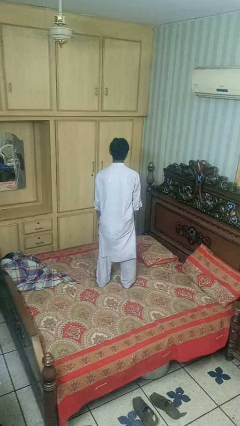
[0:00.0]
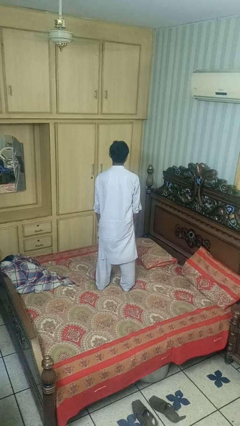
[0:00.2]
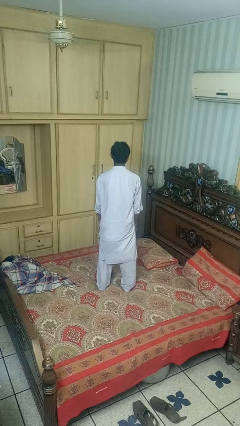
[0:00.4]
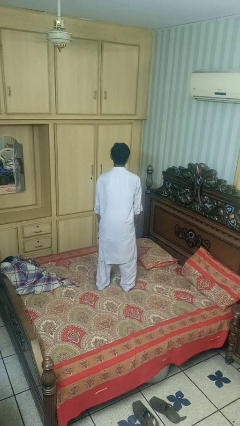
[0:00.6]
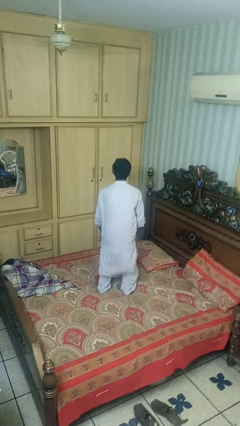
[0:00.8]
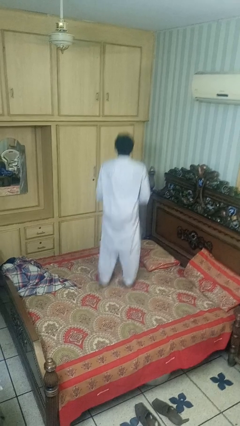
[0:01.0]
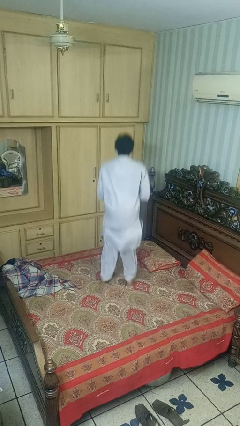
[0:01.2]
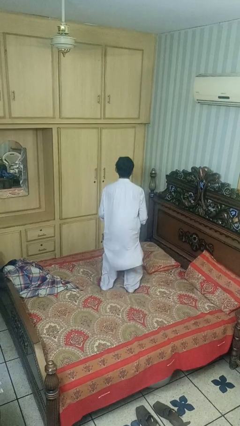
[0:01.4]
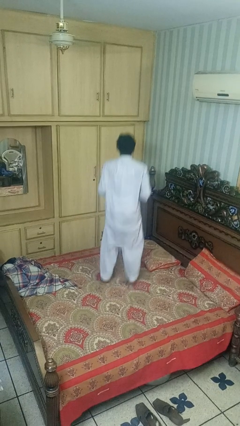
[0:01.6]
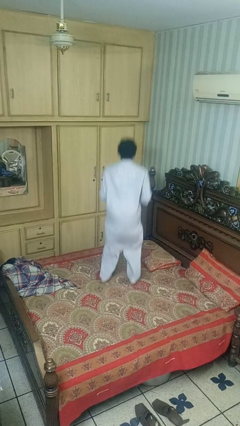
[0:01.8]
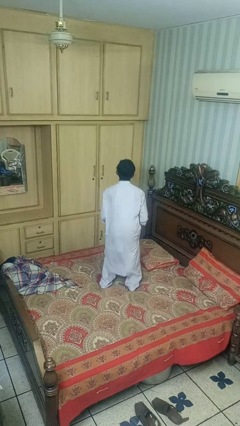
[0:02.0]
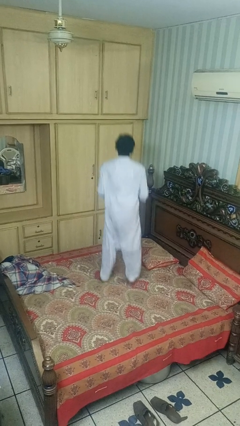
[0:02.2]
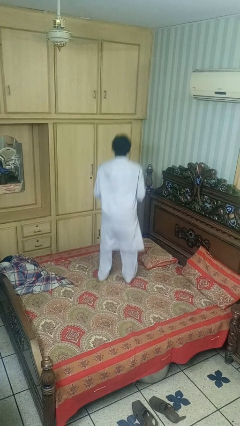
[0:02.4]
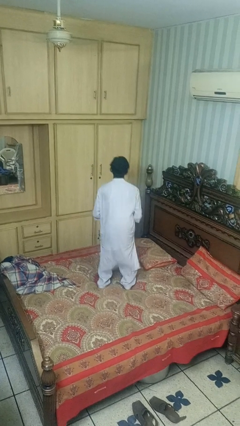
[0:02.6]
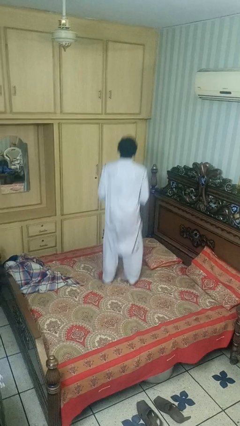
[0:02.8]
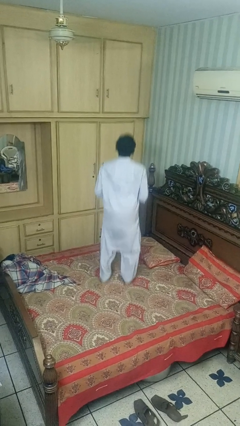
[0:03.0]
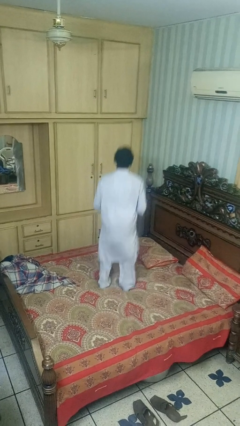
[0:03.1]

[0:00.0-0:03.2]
person jumps on bed

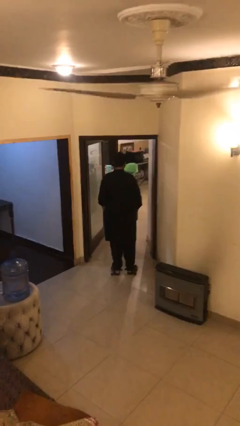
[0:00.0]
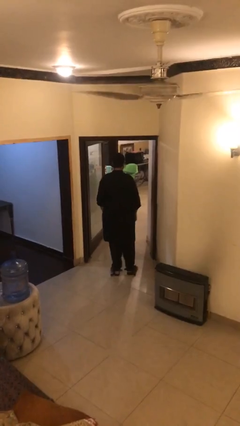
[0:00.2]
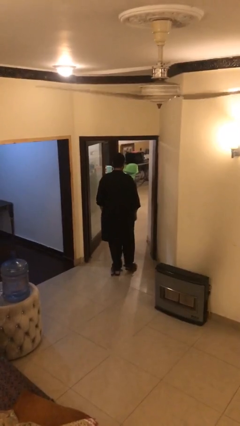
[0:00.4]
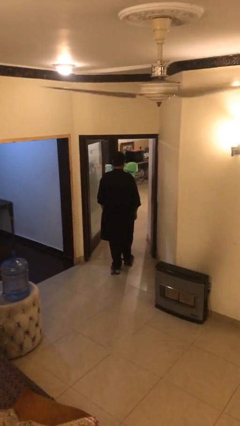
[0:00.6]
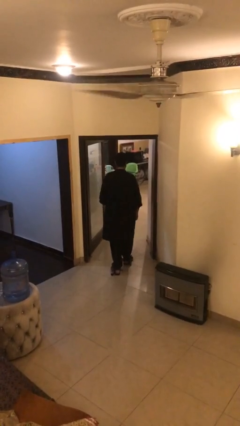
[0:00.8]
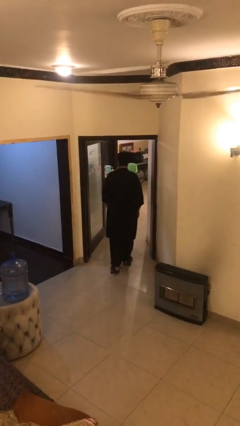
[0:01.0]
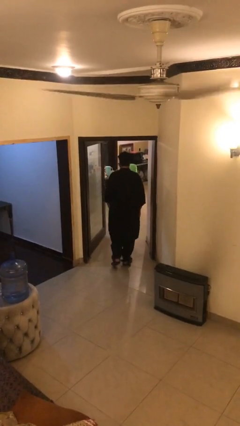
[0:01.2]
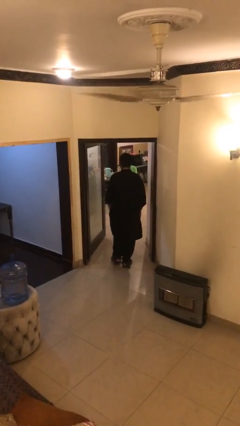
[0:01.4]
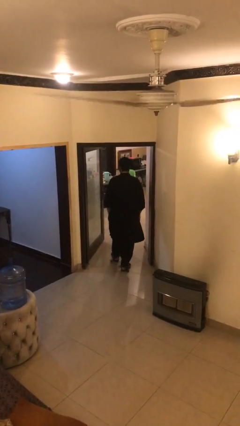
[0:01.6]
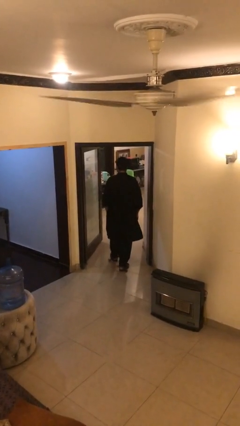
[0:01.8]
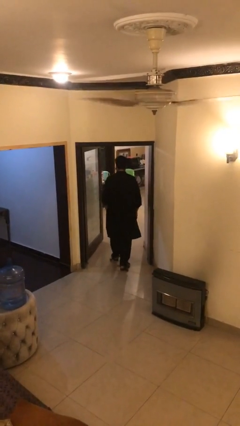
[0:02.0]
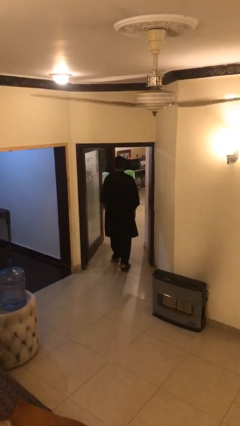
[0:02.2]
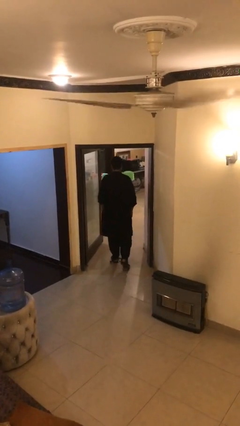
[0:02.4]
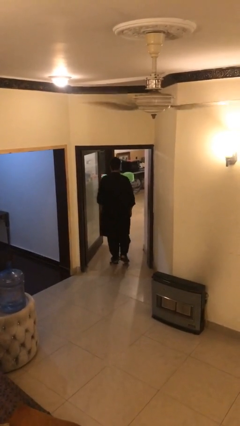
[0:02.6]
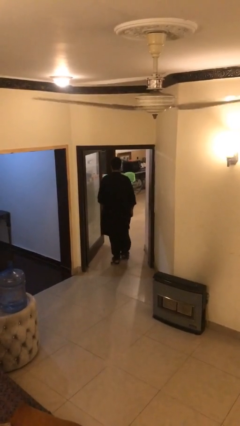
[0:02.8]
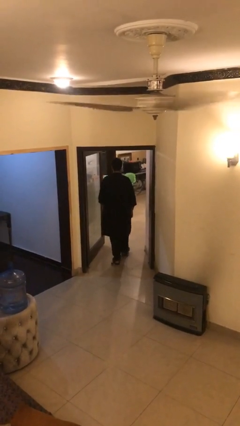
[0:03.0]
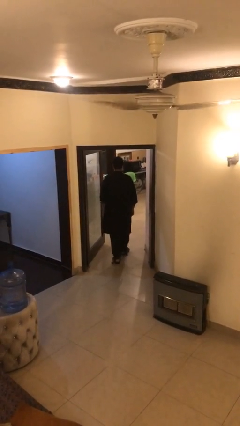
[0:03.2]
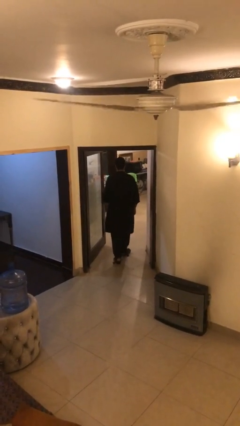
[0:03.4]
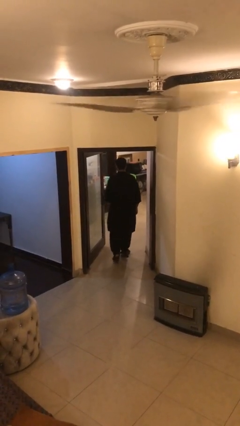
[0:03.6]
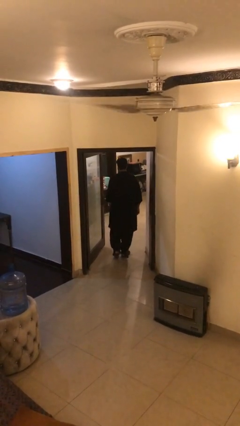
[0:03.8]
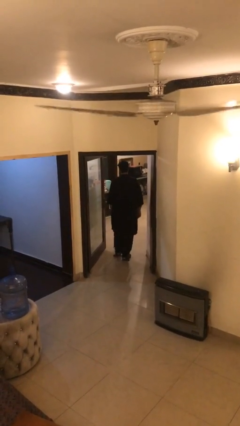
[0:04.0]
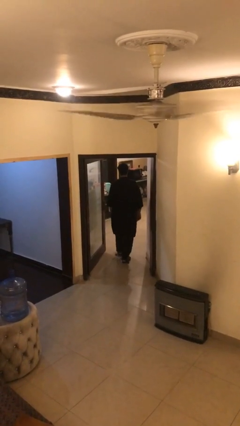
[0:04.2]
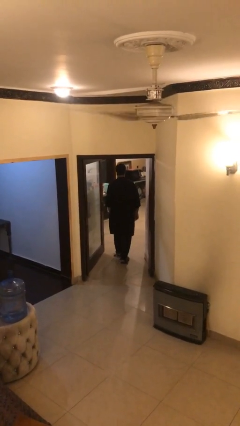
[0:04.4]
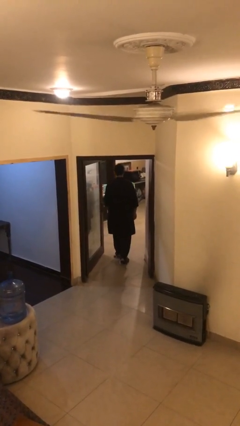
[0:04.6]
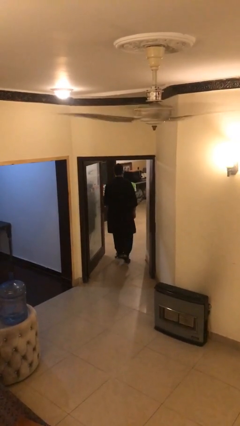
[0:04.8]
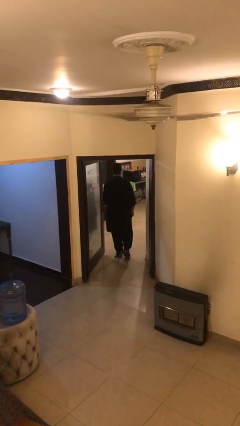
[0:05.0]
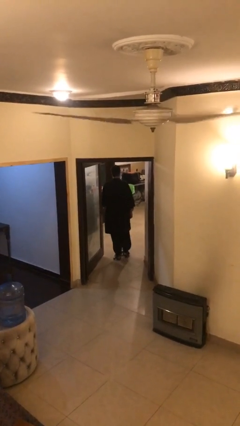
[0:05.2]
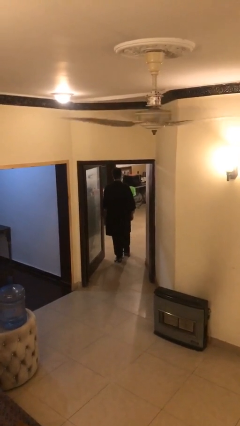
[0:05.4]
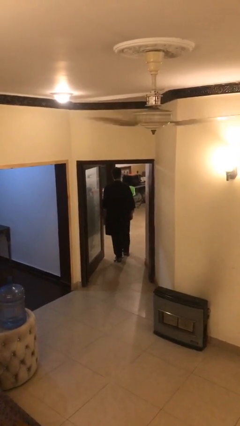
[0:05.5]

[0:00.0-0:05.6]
person exits scene through structure

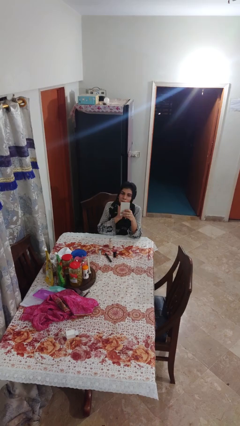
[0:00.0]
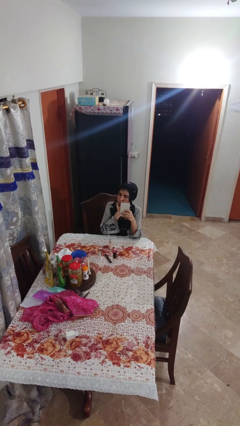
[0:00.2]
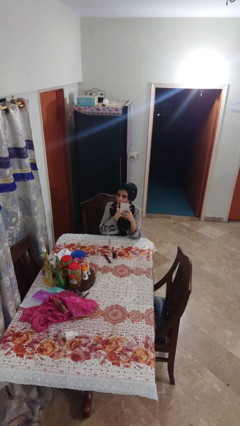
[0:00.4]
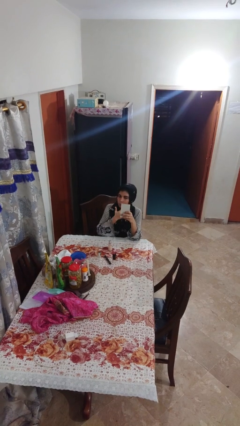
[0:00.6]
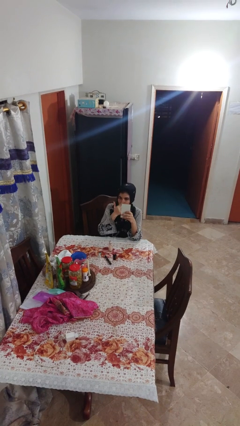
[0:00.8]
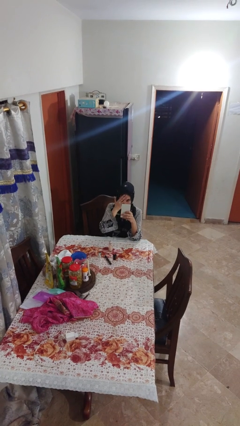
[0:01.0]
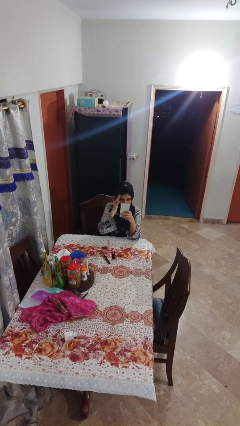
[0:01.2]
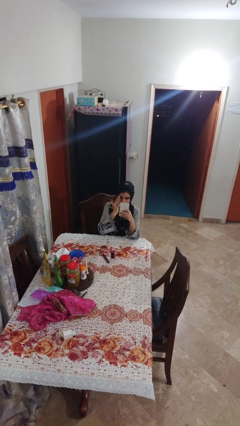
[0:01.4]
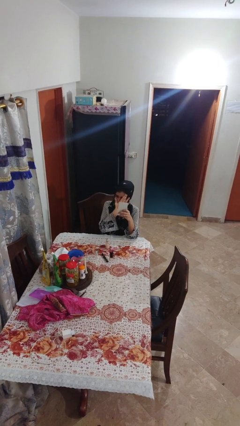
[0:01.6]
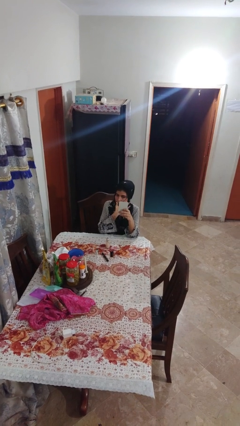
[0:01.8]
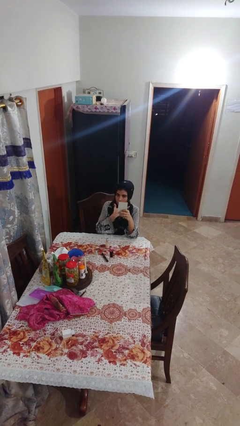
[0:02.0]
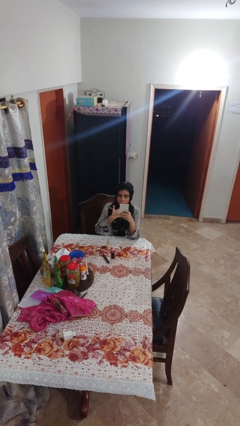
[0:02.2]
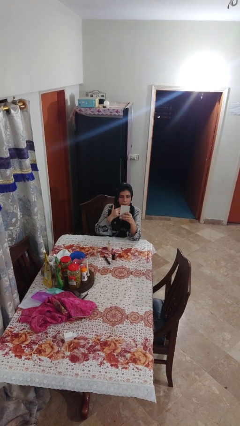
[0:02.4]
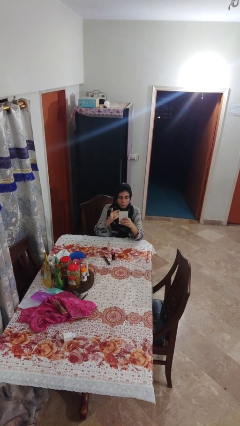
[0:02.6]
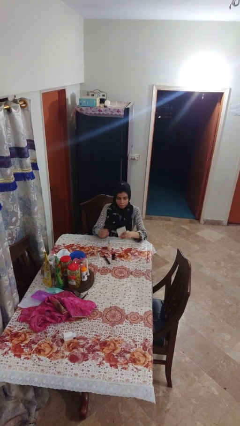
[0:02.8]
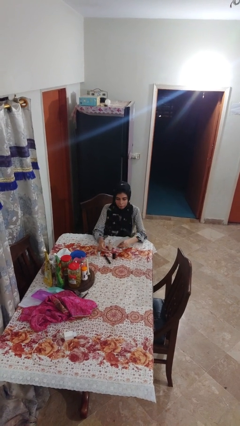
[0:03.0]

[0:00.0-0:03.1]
person applies foundation makeup

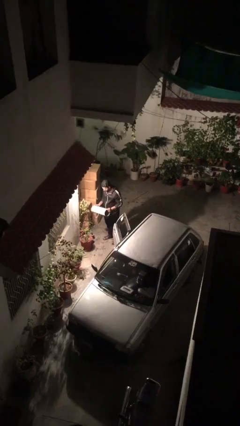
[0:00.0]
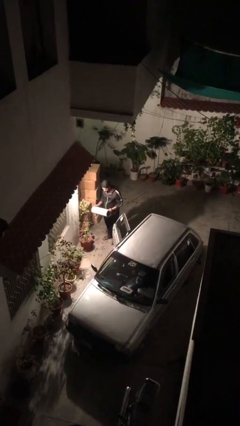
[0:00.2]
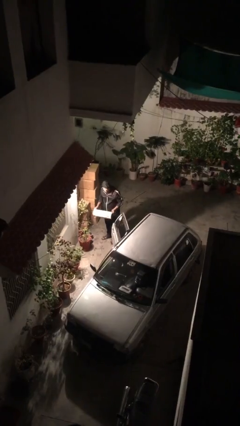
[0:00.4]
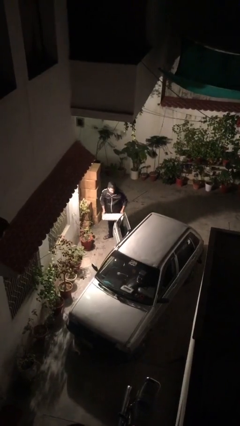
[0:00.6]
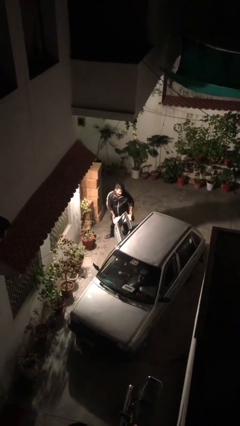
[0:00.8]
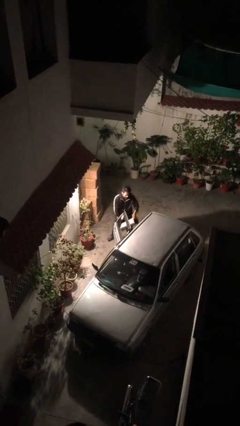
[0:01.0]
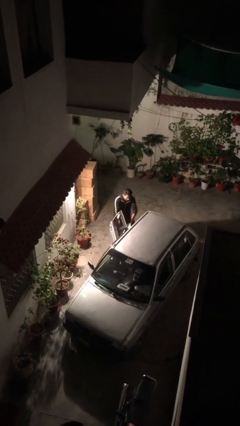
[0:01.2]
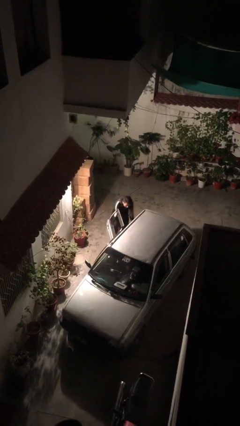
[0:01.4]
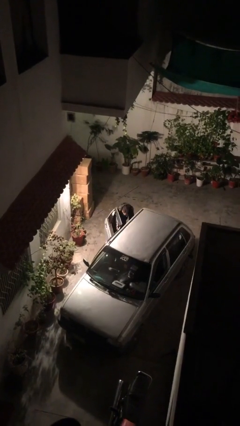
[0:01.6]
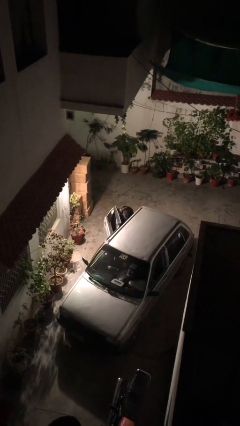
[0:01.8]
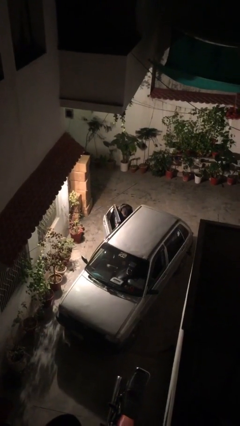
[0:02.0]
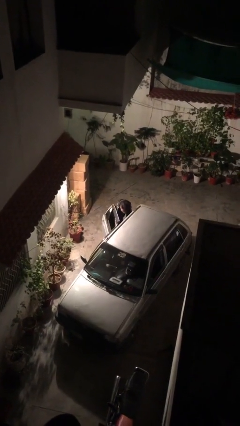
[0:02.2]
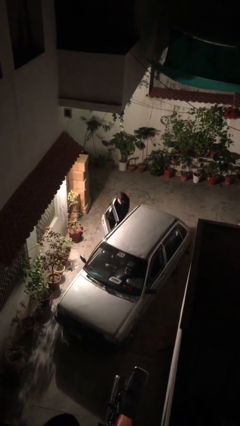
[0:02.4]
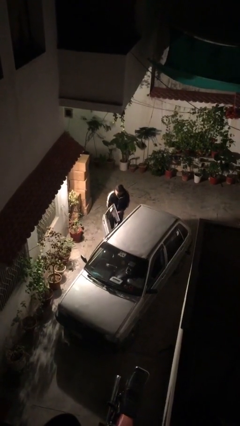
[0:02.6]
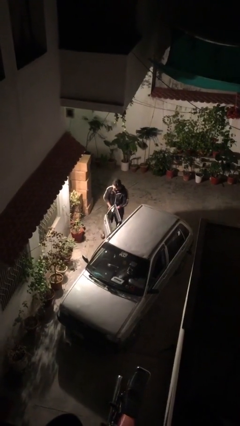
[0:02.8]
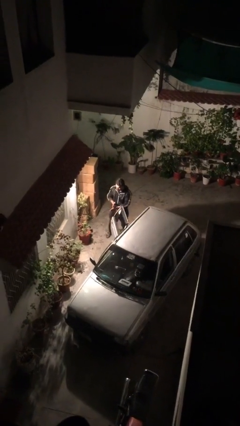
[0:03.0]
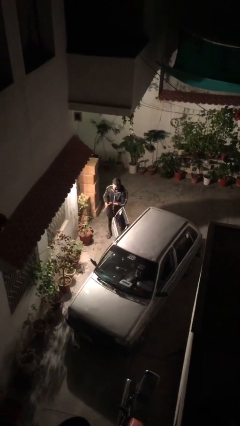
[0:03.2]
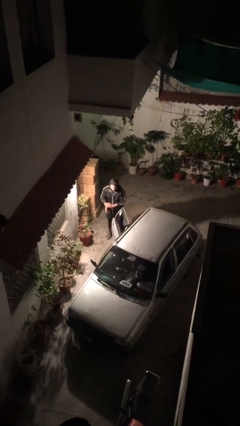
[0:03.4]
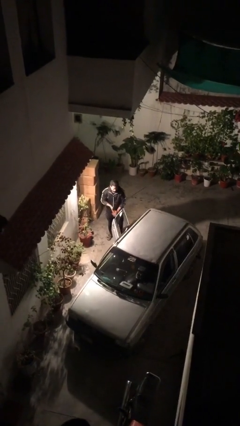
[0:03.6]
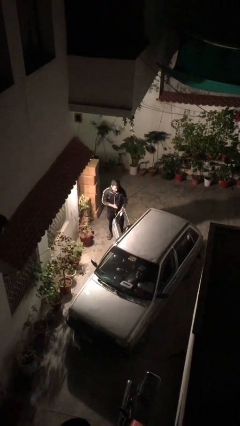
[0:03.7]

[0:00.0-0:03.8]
person loads car

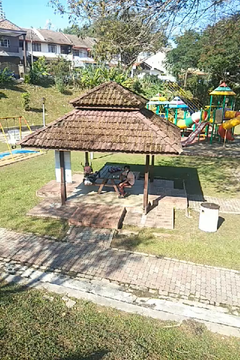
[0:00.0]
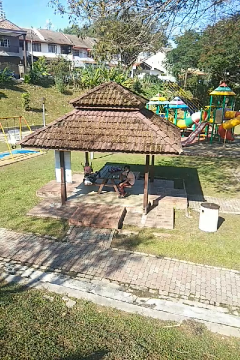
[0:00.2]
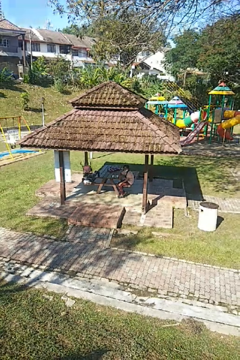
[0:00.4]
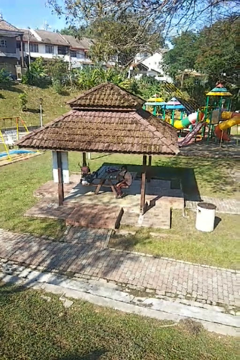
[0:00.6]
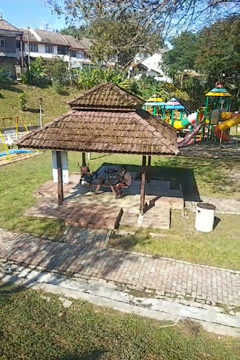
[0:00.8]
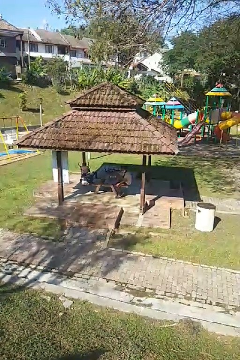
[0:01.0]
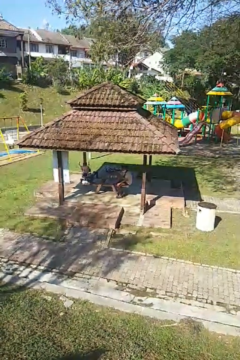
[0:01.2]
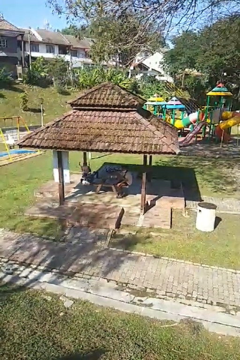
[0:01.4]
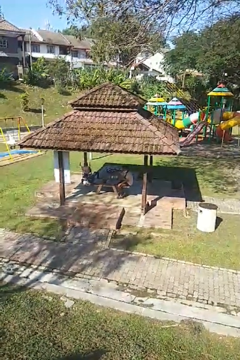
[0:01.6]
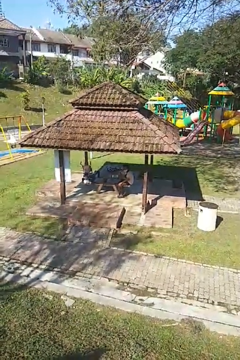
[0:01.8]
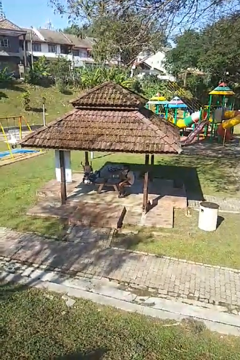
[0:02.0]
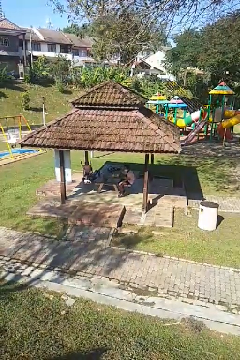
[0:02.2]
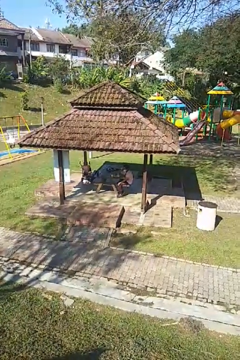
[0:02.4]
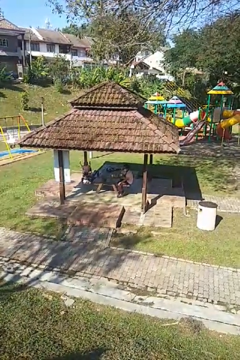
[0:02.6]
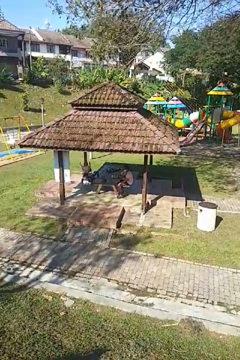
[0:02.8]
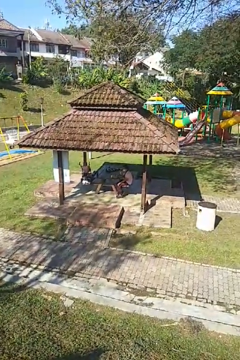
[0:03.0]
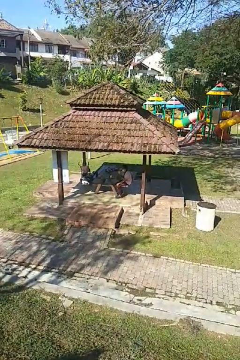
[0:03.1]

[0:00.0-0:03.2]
person picks up object from table
